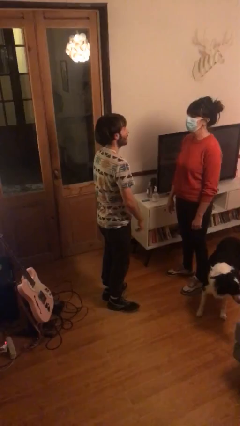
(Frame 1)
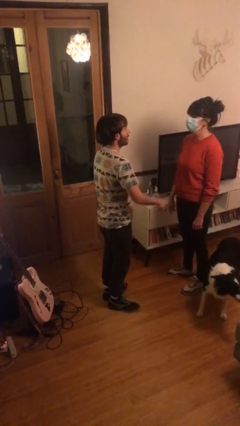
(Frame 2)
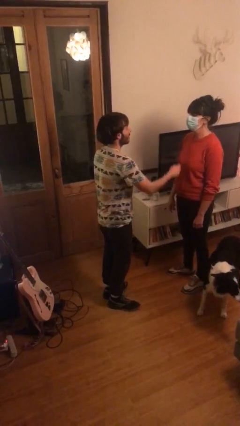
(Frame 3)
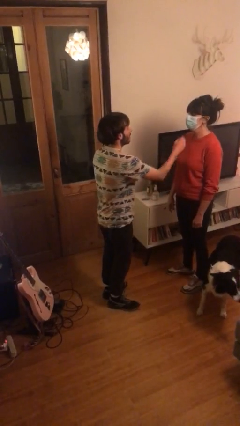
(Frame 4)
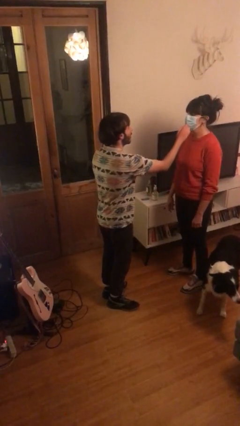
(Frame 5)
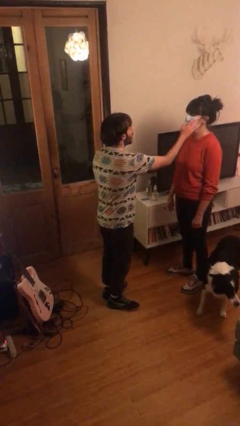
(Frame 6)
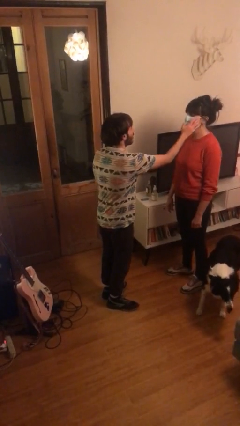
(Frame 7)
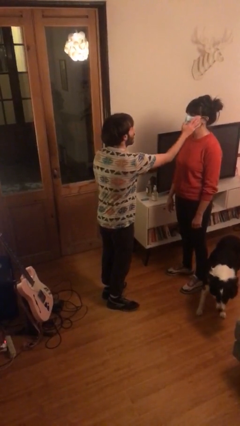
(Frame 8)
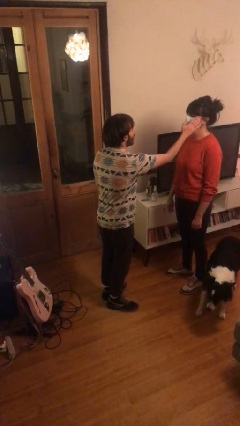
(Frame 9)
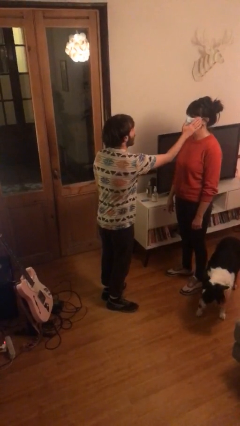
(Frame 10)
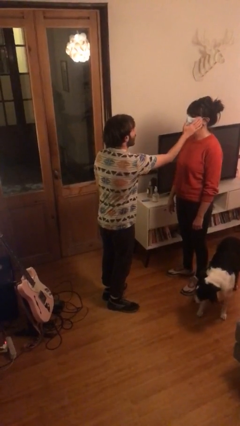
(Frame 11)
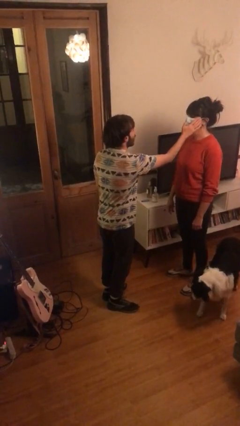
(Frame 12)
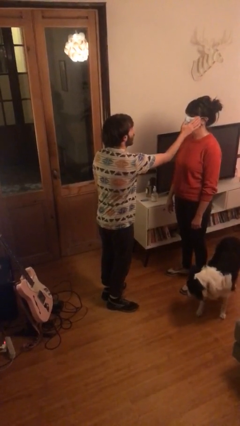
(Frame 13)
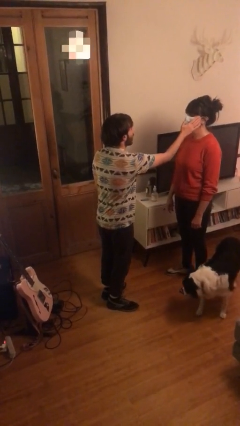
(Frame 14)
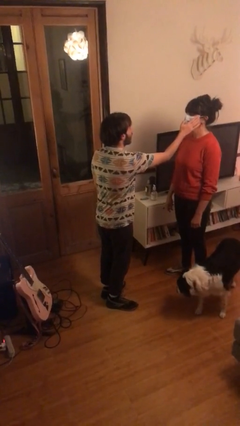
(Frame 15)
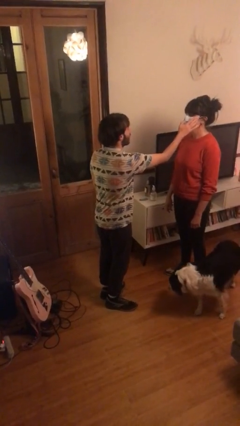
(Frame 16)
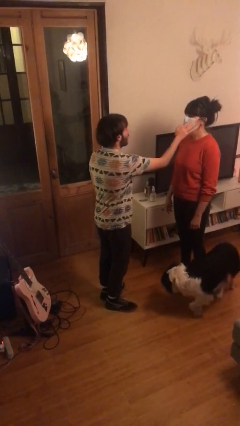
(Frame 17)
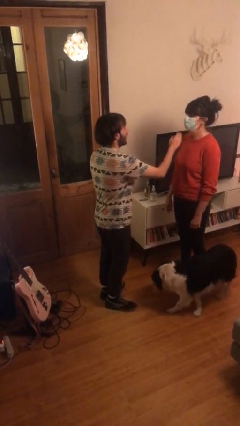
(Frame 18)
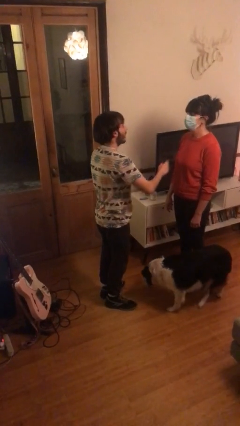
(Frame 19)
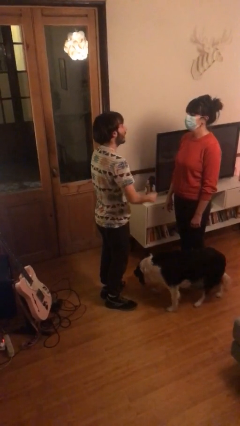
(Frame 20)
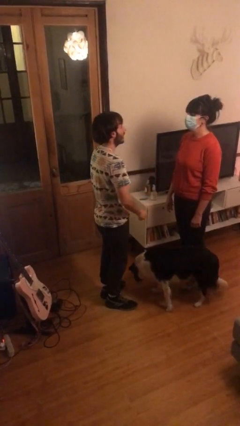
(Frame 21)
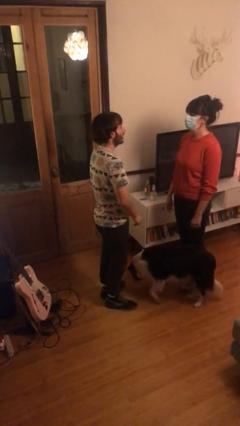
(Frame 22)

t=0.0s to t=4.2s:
person touches face of person

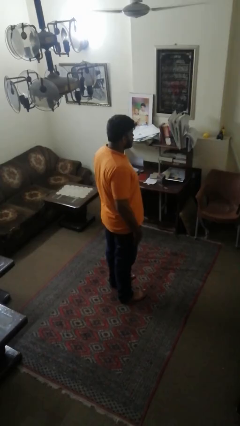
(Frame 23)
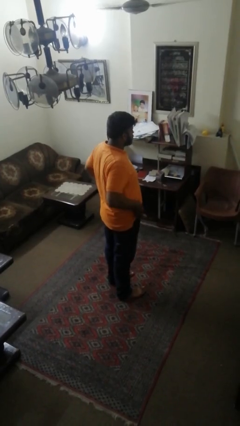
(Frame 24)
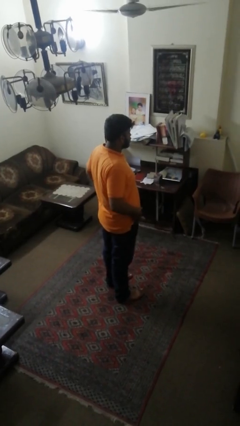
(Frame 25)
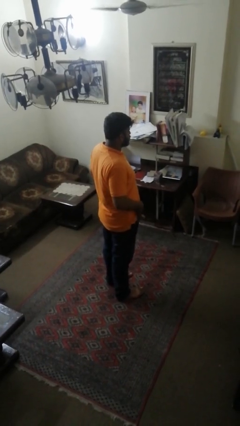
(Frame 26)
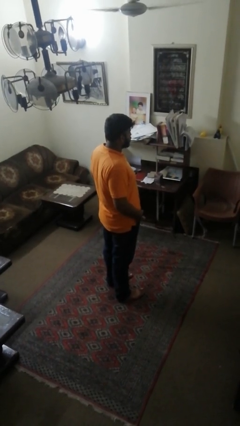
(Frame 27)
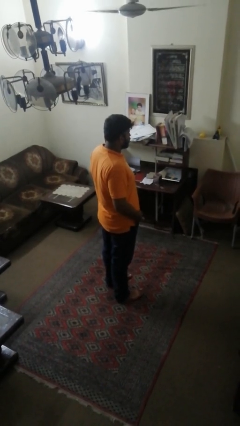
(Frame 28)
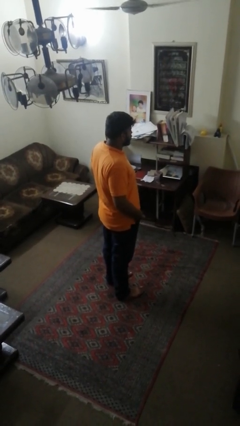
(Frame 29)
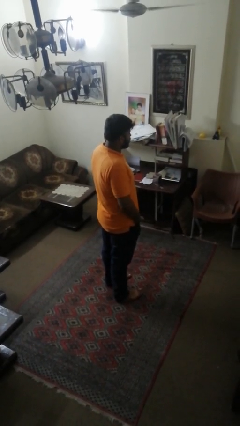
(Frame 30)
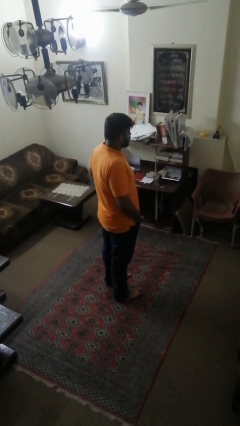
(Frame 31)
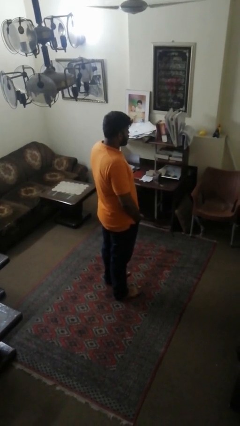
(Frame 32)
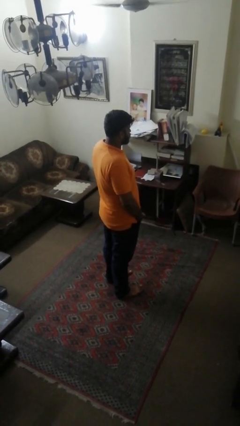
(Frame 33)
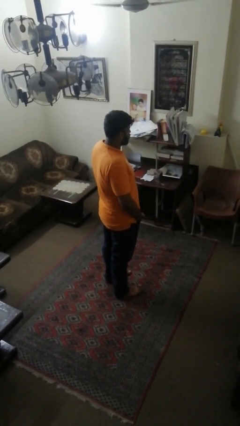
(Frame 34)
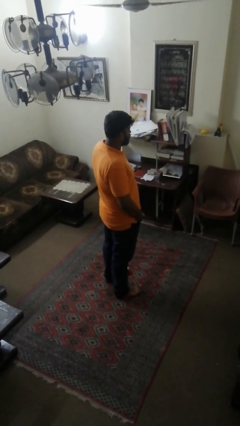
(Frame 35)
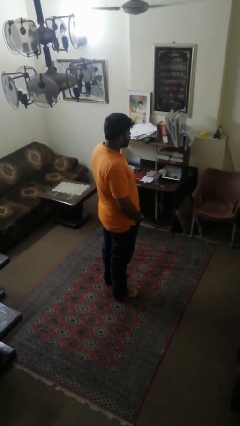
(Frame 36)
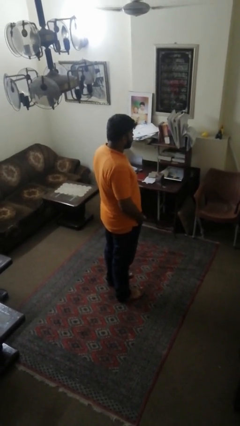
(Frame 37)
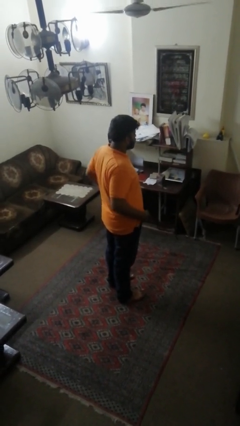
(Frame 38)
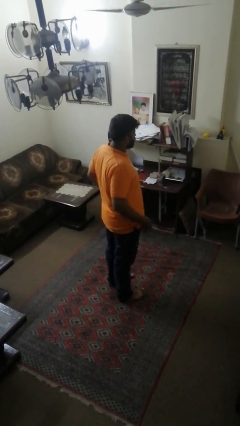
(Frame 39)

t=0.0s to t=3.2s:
person puts hands in back pockets

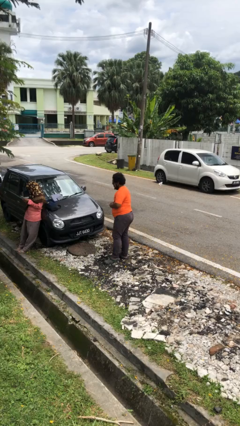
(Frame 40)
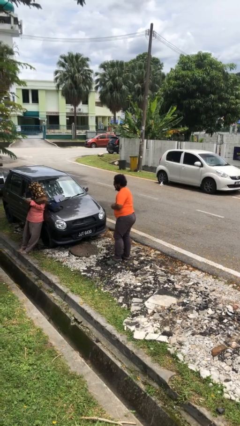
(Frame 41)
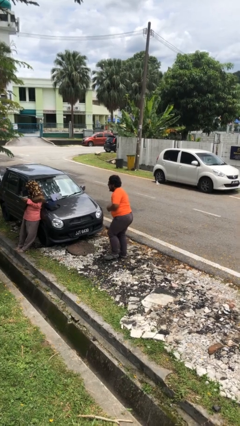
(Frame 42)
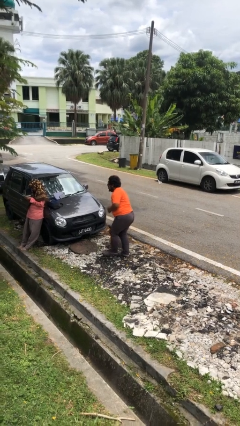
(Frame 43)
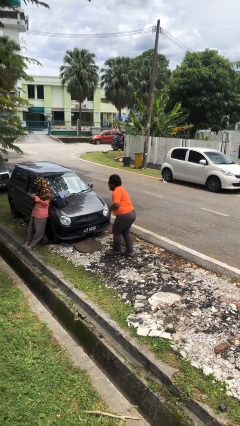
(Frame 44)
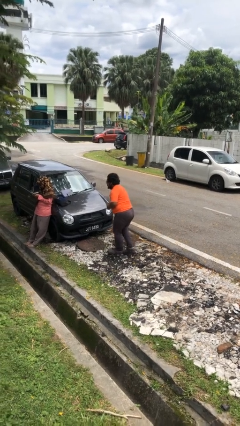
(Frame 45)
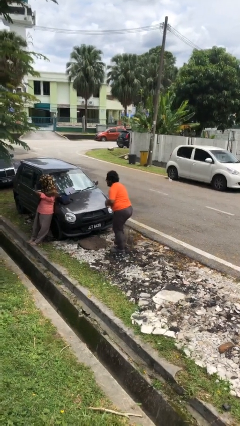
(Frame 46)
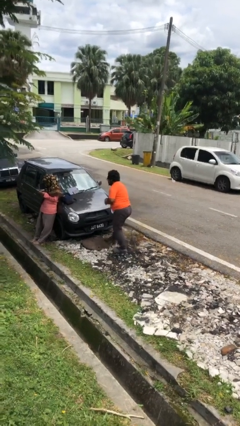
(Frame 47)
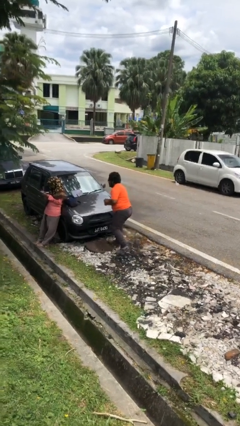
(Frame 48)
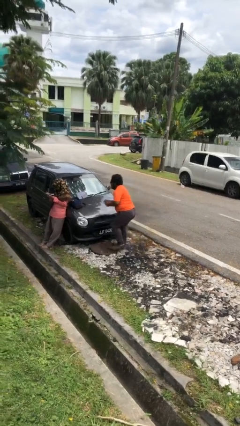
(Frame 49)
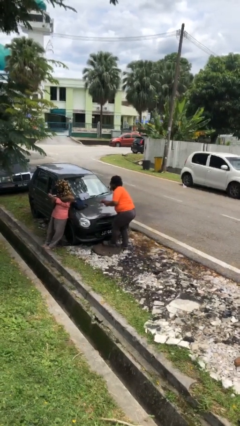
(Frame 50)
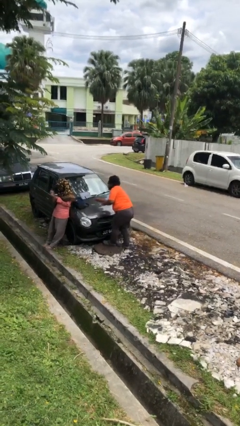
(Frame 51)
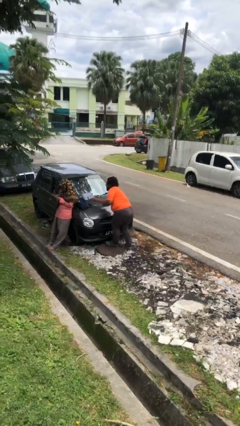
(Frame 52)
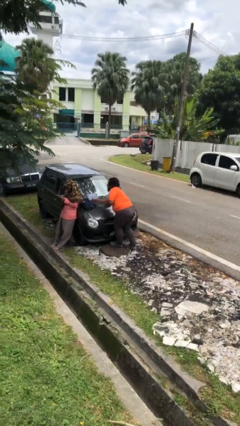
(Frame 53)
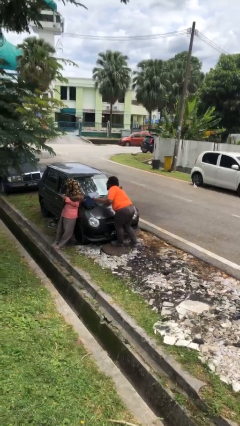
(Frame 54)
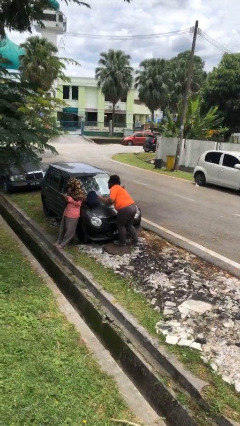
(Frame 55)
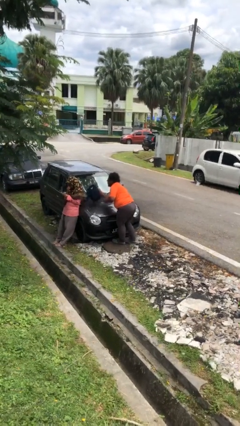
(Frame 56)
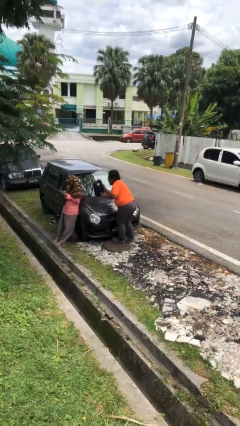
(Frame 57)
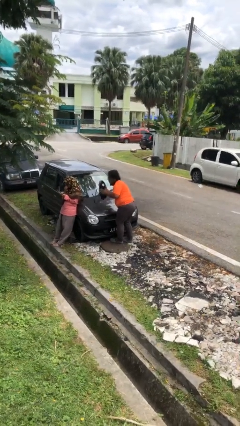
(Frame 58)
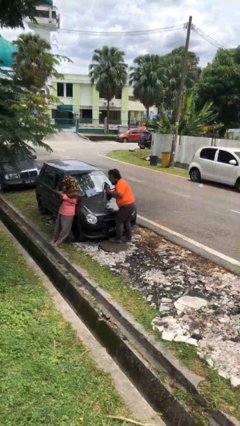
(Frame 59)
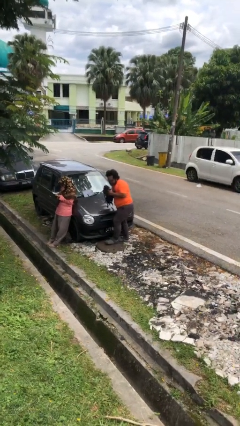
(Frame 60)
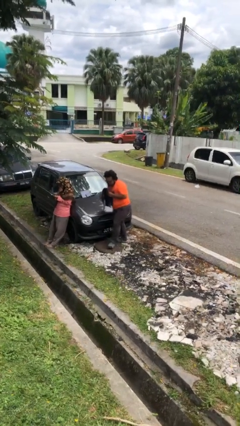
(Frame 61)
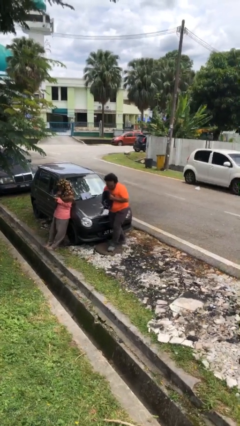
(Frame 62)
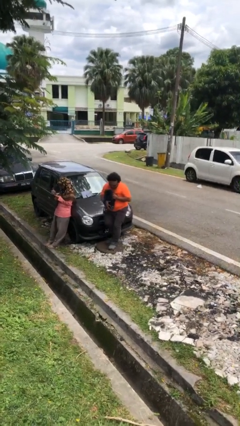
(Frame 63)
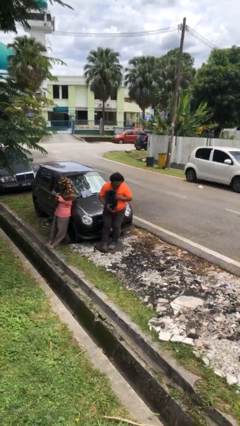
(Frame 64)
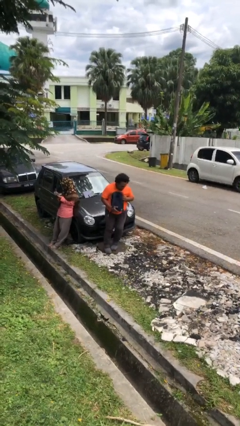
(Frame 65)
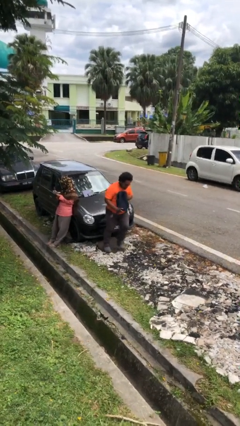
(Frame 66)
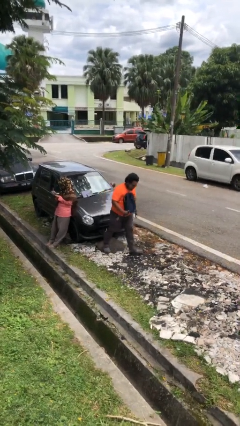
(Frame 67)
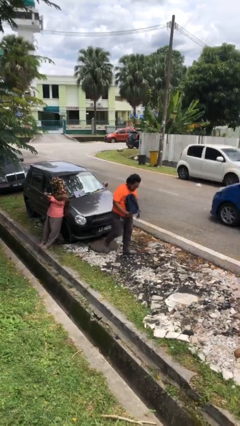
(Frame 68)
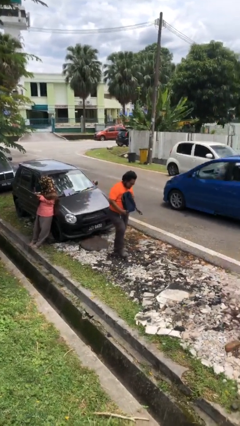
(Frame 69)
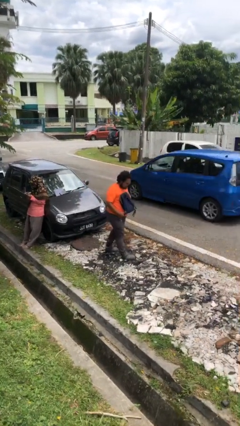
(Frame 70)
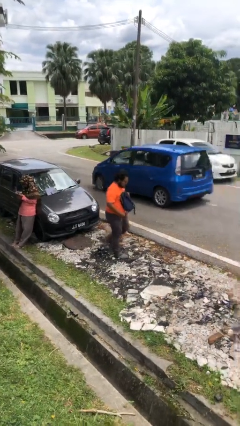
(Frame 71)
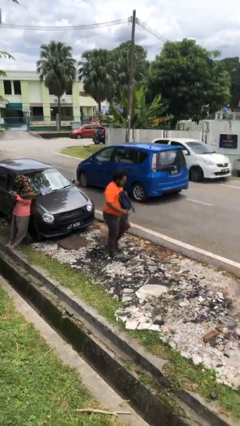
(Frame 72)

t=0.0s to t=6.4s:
person steals object from person

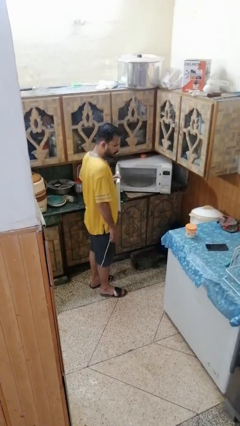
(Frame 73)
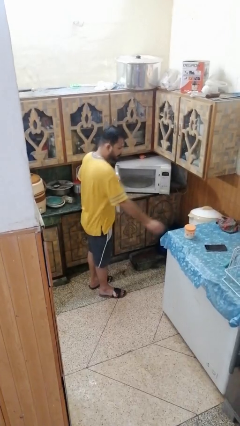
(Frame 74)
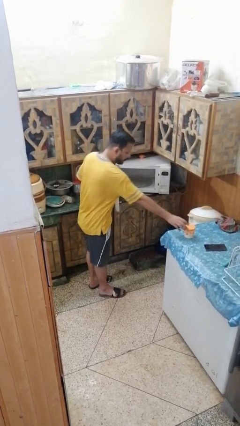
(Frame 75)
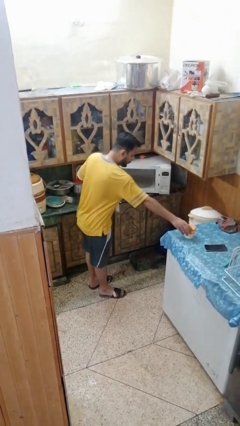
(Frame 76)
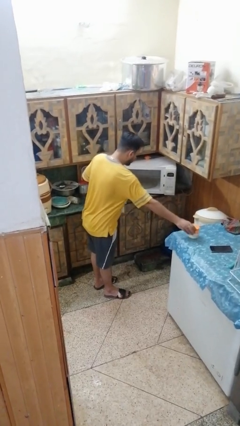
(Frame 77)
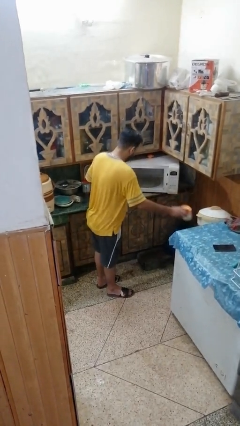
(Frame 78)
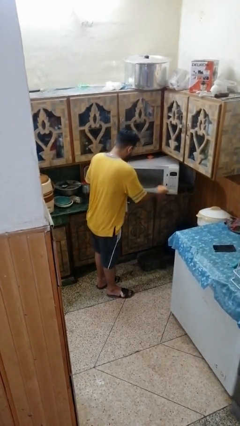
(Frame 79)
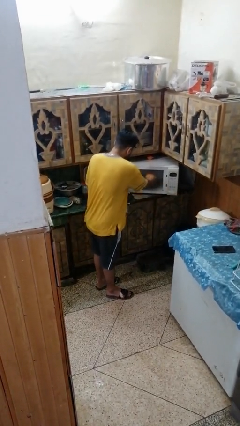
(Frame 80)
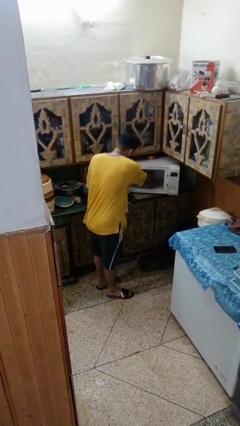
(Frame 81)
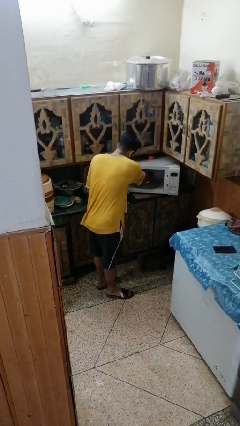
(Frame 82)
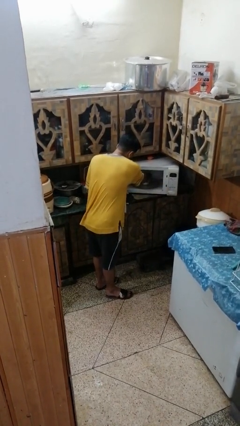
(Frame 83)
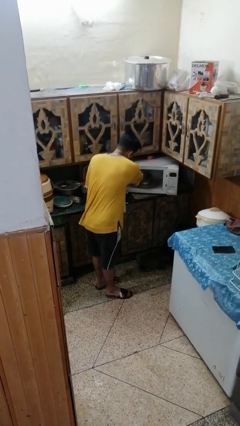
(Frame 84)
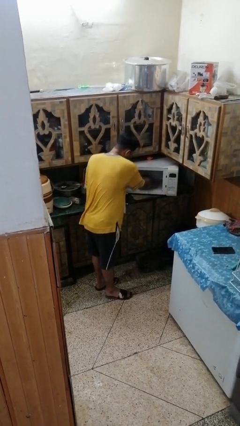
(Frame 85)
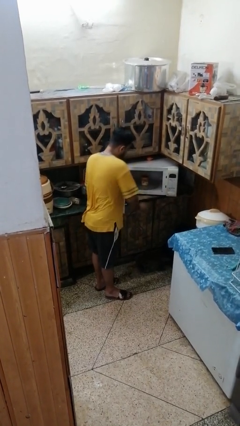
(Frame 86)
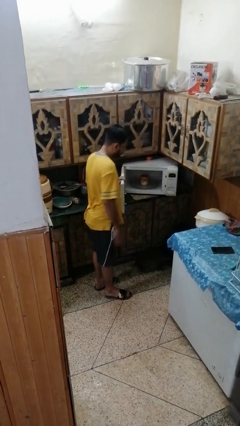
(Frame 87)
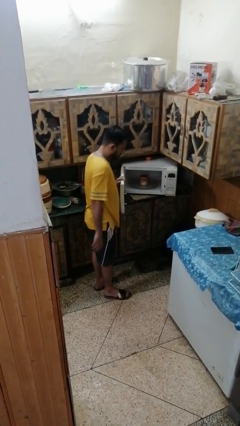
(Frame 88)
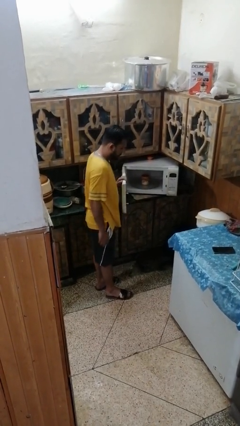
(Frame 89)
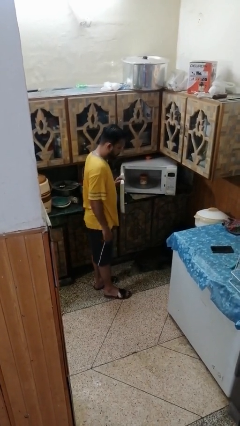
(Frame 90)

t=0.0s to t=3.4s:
person puts object into refrigerator

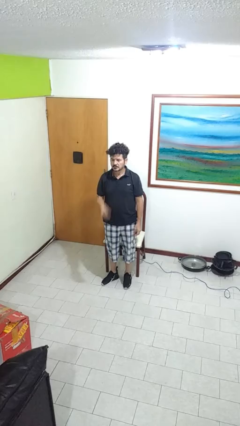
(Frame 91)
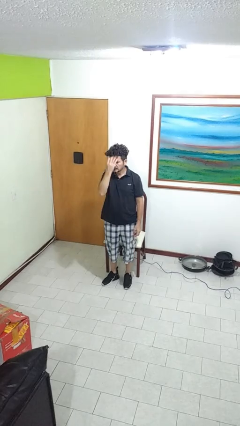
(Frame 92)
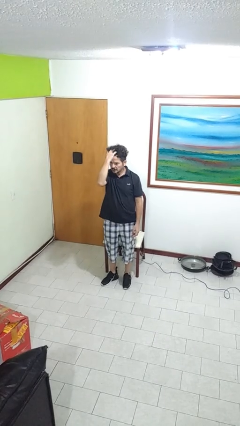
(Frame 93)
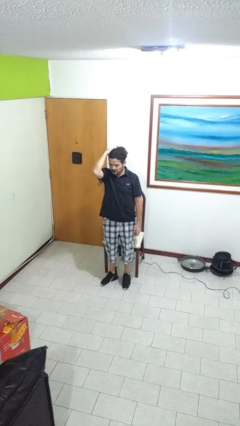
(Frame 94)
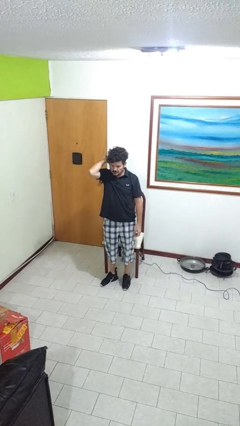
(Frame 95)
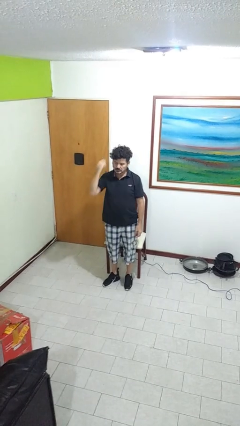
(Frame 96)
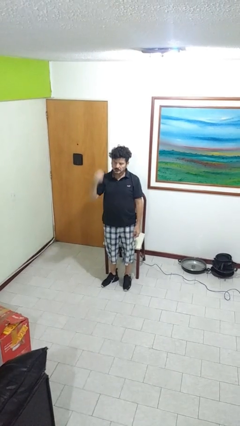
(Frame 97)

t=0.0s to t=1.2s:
person strokes hair
